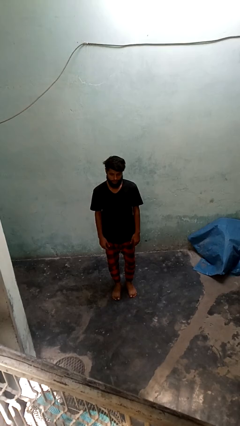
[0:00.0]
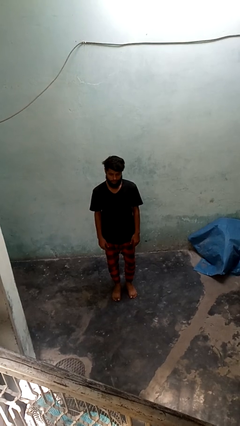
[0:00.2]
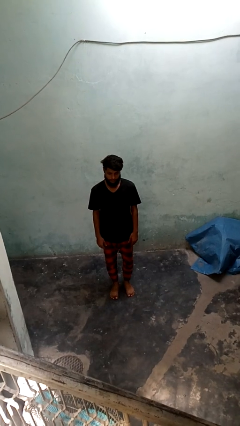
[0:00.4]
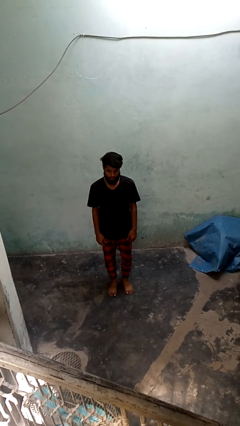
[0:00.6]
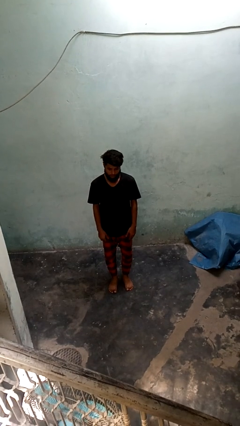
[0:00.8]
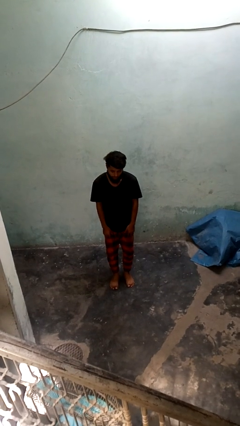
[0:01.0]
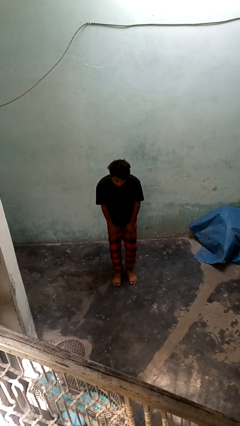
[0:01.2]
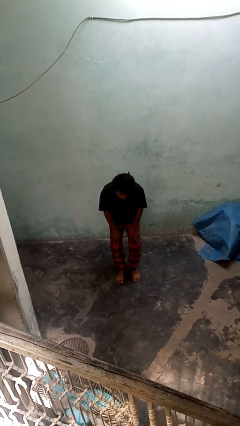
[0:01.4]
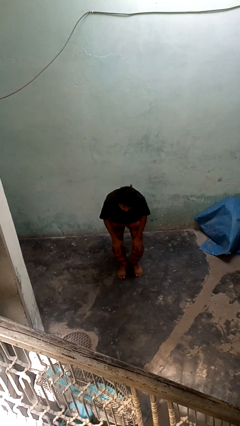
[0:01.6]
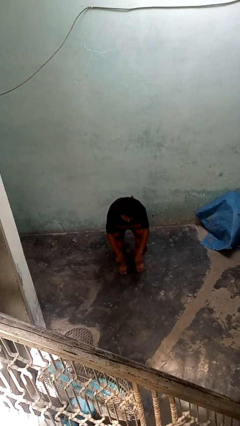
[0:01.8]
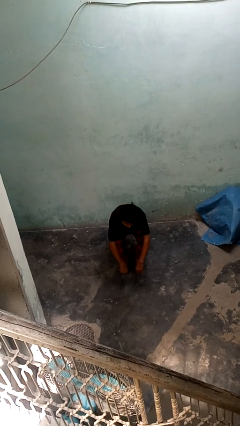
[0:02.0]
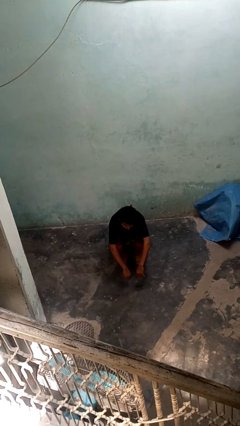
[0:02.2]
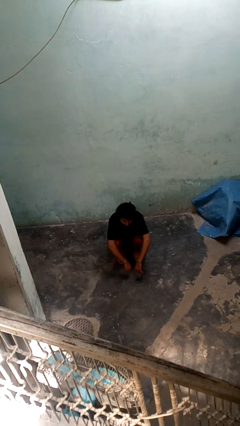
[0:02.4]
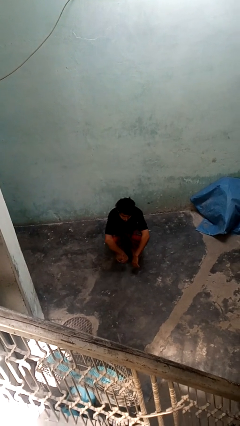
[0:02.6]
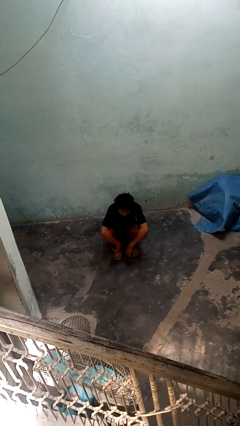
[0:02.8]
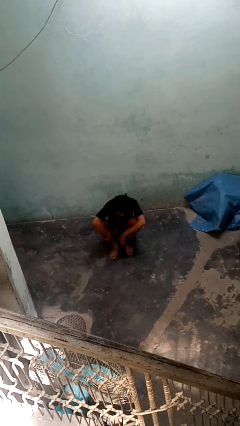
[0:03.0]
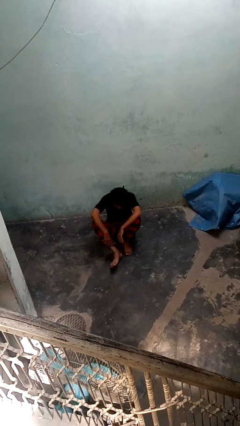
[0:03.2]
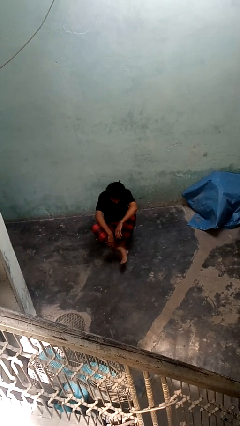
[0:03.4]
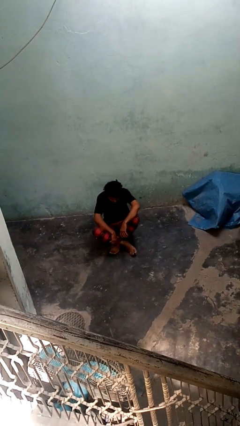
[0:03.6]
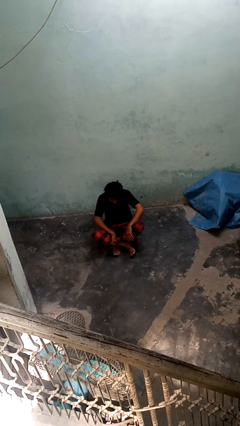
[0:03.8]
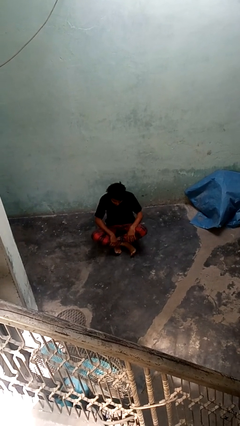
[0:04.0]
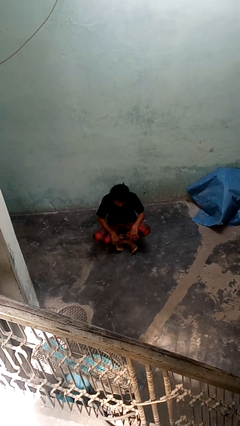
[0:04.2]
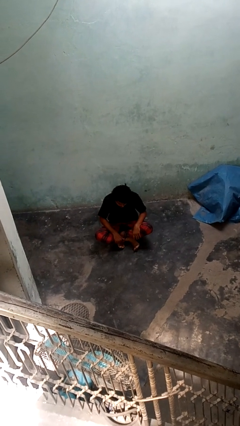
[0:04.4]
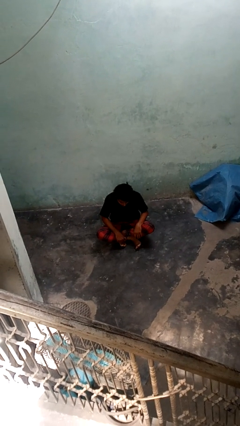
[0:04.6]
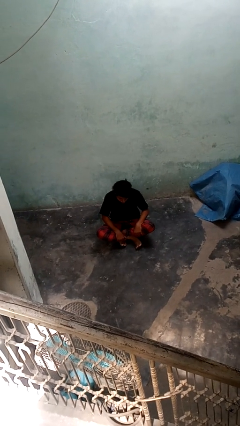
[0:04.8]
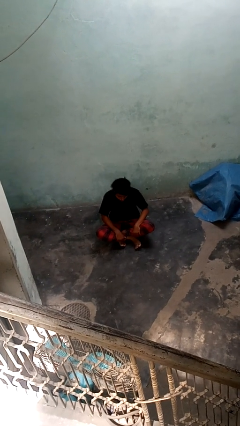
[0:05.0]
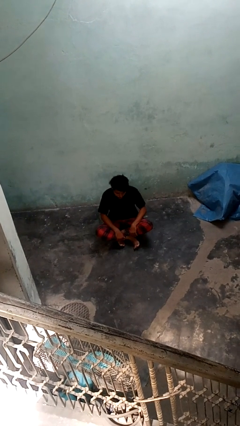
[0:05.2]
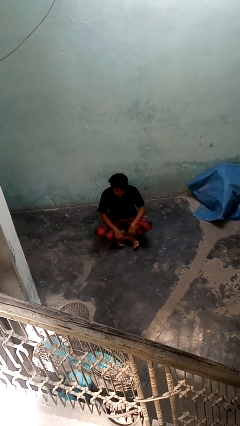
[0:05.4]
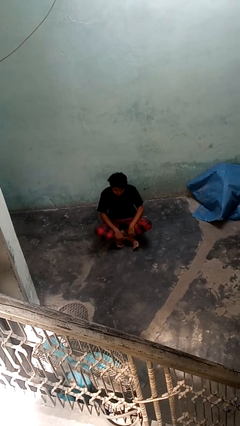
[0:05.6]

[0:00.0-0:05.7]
person sits crisscross

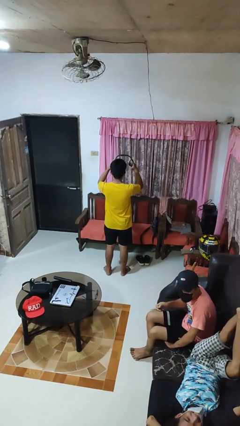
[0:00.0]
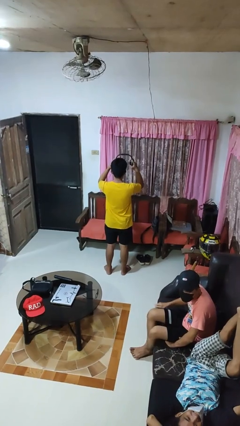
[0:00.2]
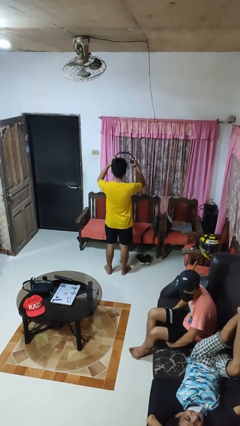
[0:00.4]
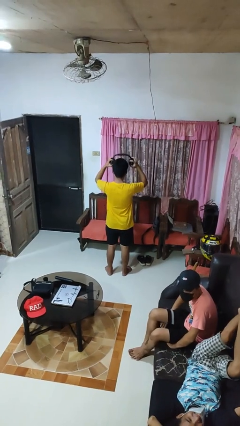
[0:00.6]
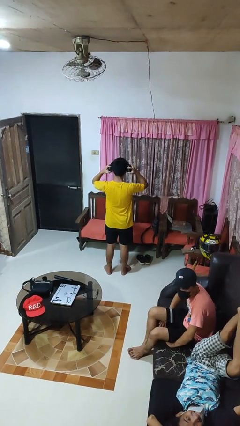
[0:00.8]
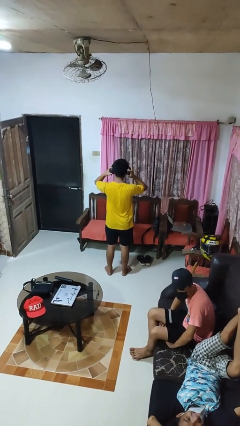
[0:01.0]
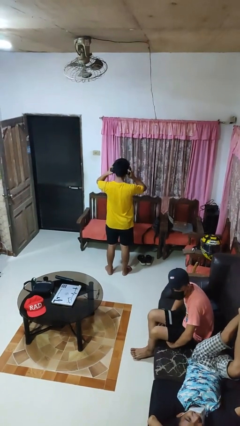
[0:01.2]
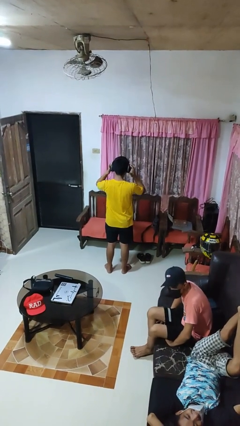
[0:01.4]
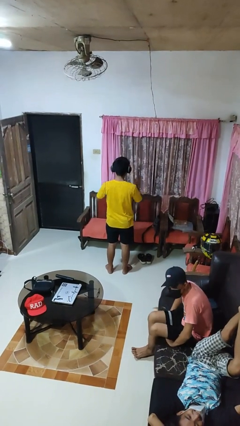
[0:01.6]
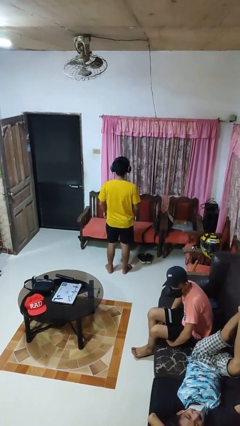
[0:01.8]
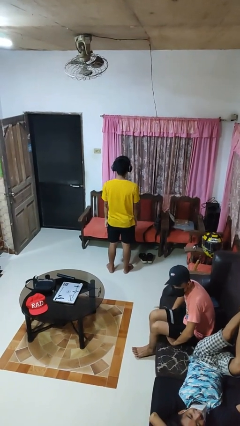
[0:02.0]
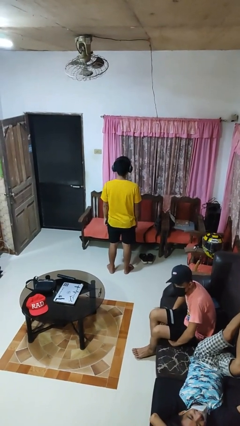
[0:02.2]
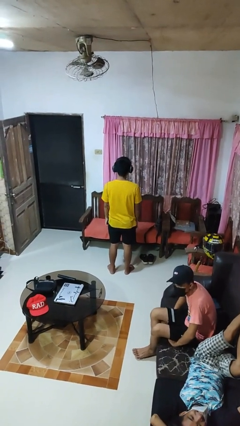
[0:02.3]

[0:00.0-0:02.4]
person puts on headphones

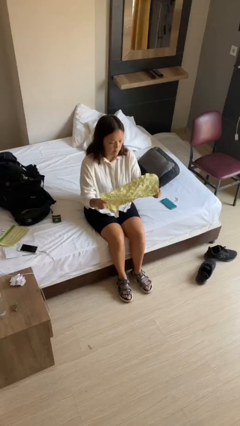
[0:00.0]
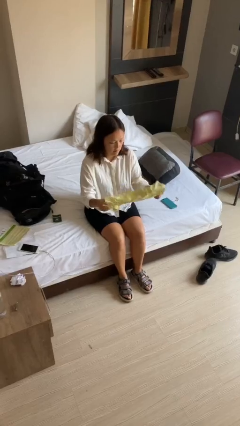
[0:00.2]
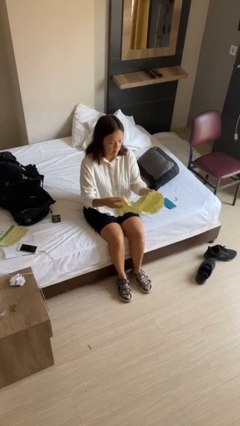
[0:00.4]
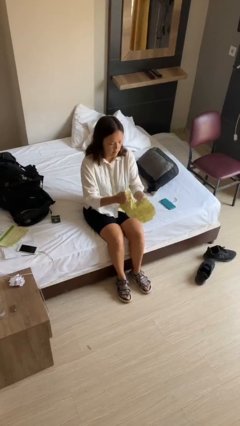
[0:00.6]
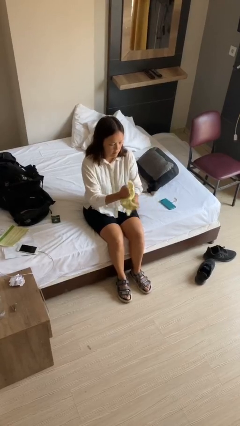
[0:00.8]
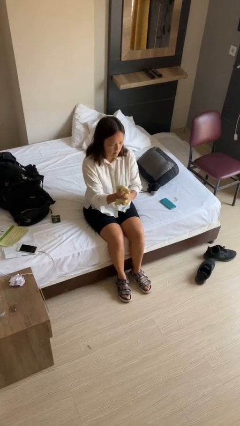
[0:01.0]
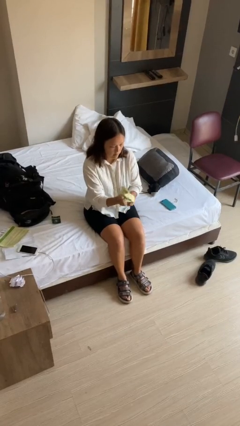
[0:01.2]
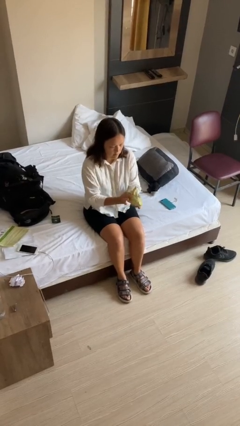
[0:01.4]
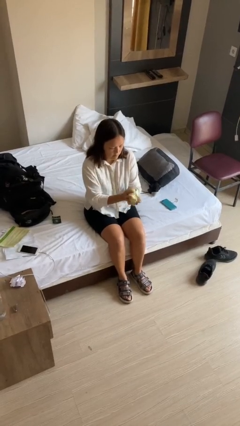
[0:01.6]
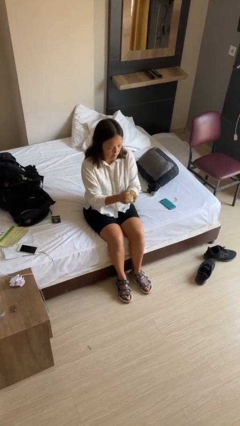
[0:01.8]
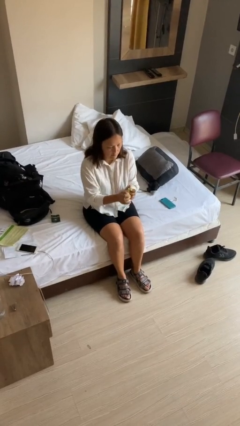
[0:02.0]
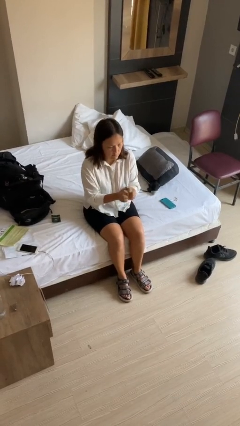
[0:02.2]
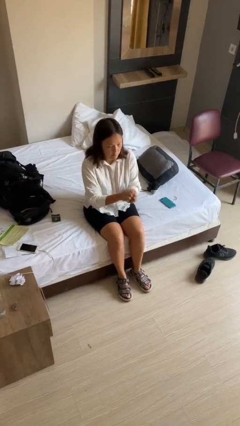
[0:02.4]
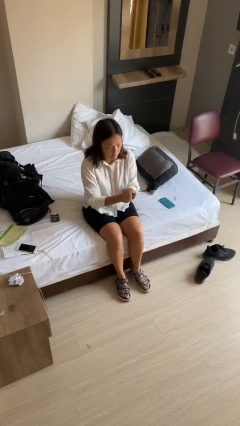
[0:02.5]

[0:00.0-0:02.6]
person crumples paper

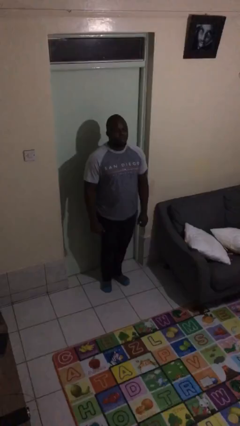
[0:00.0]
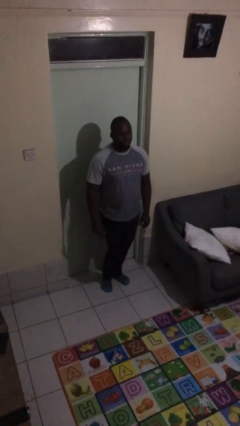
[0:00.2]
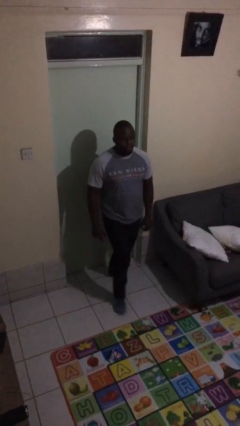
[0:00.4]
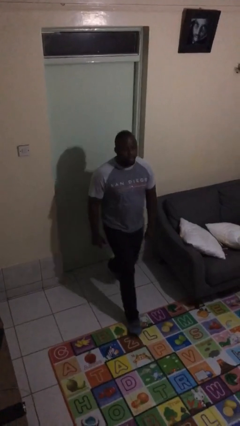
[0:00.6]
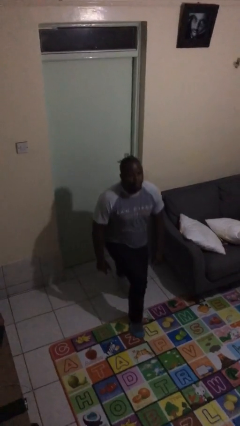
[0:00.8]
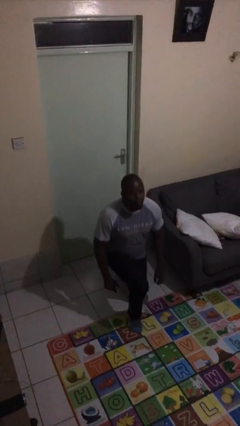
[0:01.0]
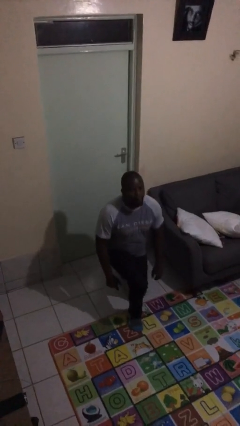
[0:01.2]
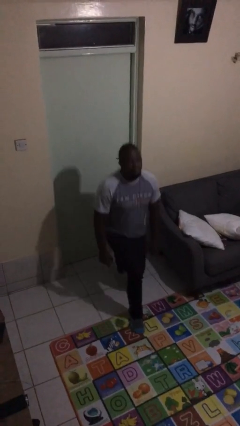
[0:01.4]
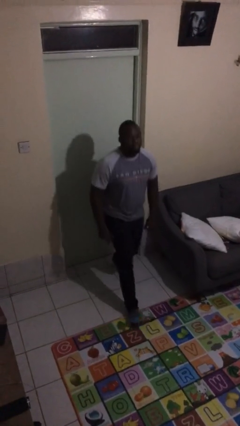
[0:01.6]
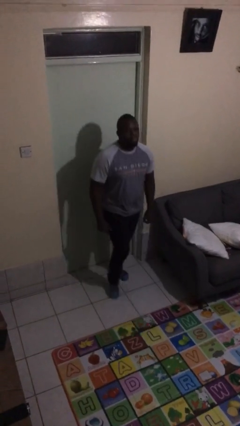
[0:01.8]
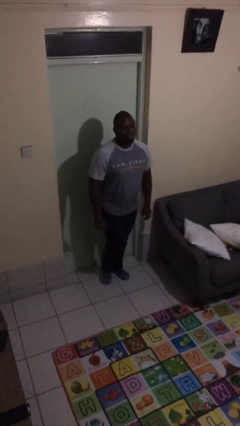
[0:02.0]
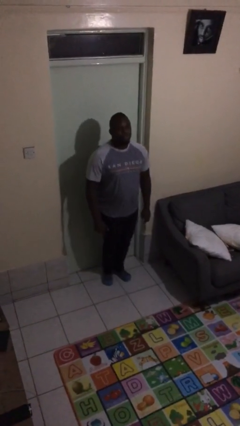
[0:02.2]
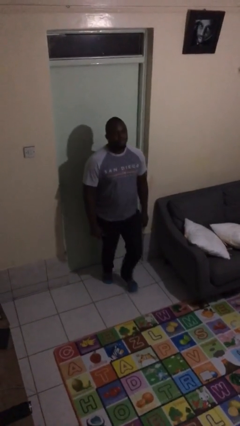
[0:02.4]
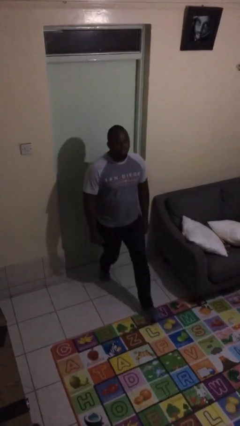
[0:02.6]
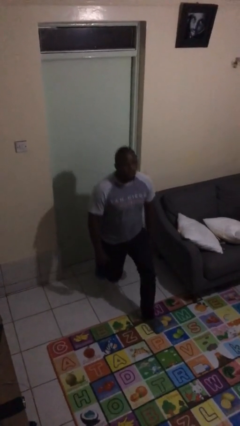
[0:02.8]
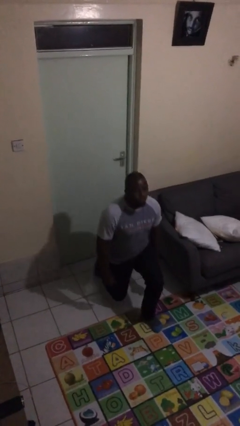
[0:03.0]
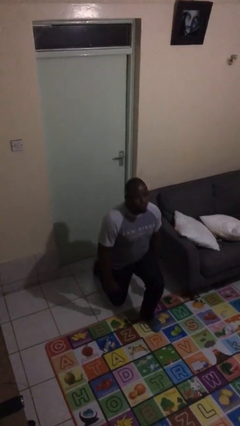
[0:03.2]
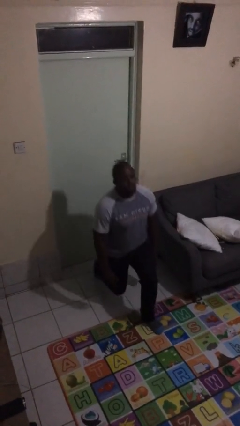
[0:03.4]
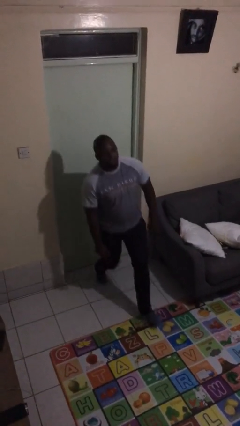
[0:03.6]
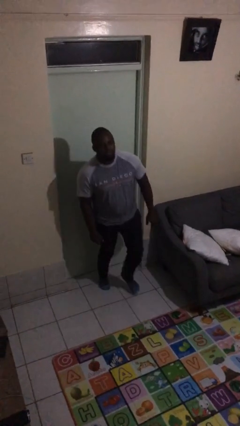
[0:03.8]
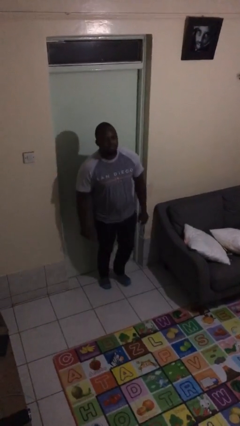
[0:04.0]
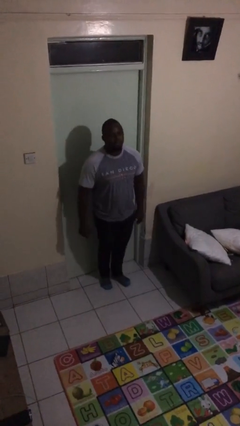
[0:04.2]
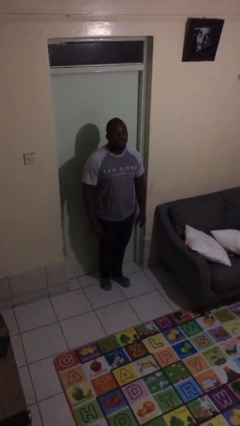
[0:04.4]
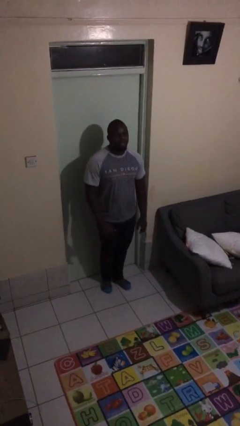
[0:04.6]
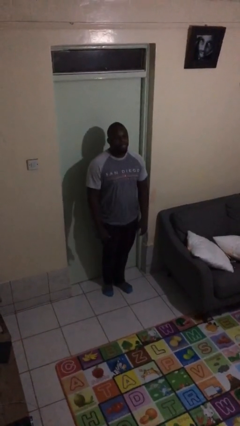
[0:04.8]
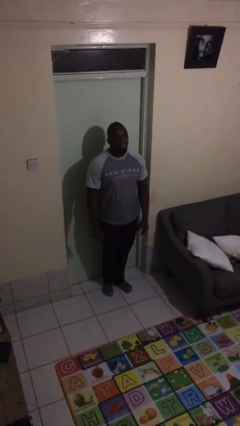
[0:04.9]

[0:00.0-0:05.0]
person exercises with lunges

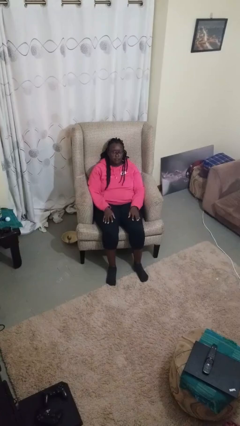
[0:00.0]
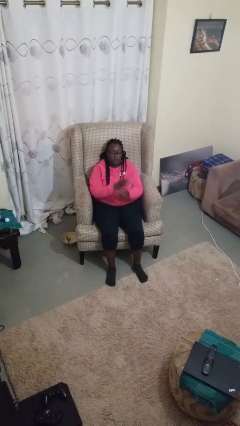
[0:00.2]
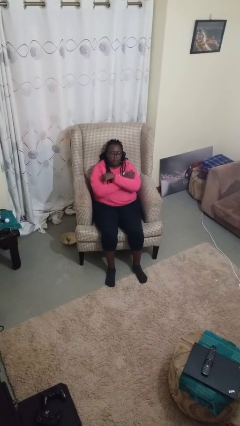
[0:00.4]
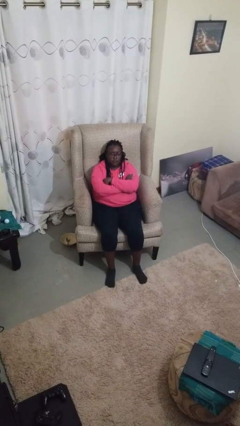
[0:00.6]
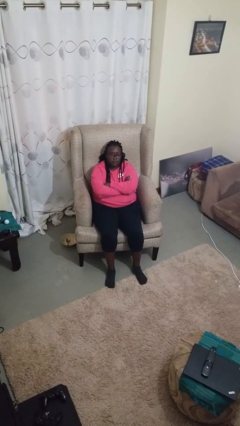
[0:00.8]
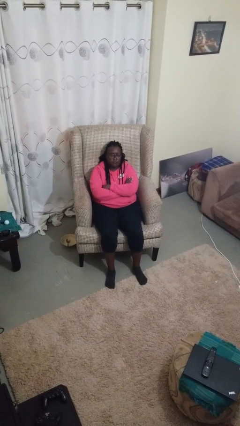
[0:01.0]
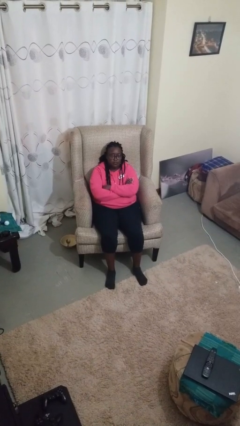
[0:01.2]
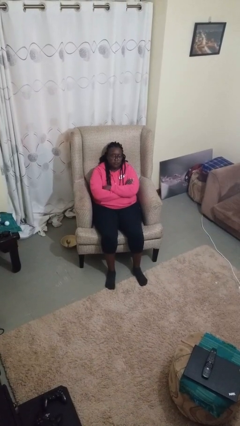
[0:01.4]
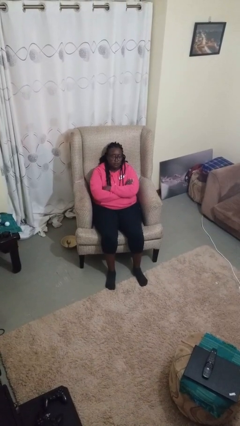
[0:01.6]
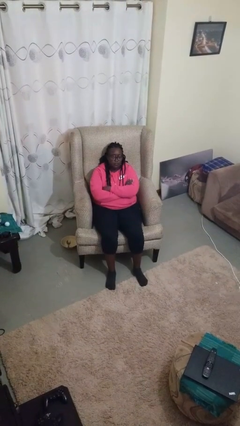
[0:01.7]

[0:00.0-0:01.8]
person crosses arms

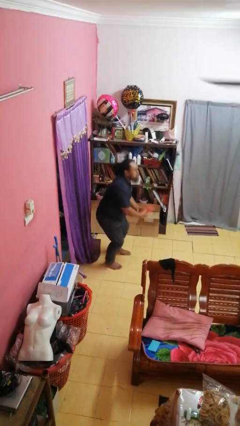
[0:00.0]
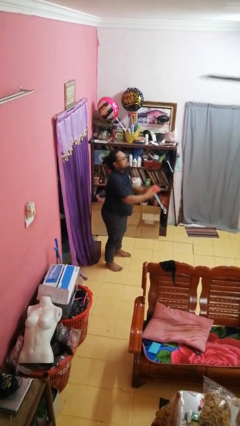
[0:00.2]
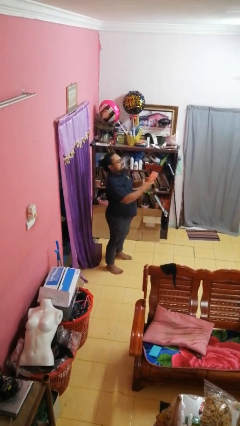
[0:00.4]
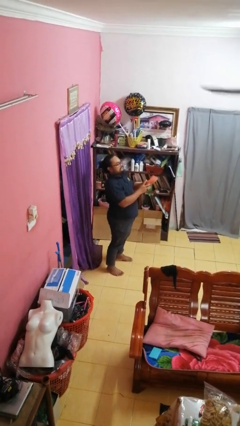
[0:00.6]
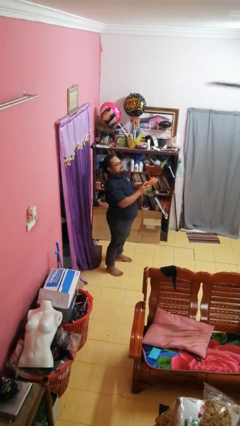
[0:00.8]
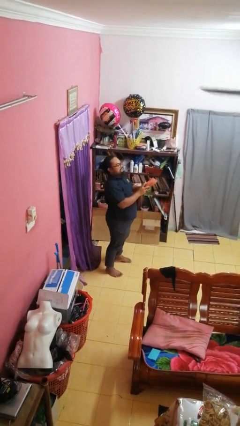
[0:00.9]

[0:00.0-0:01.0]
person catches dropped object
